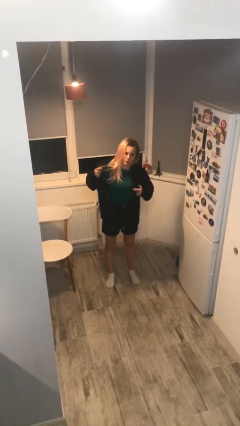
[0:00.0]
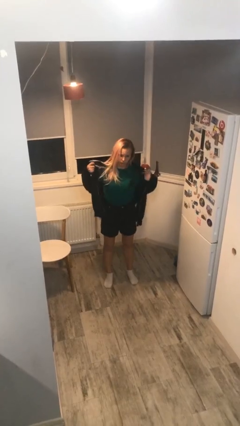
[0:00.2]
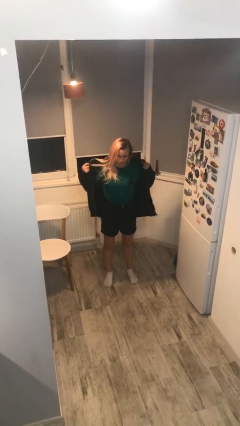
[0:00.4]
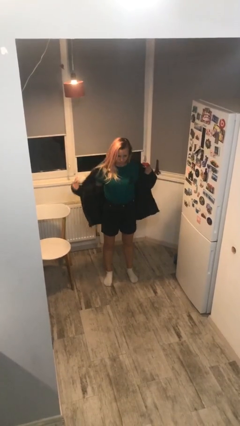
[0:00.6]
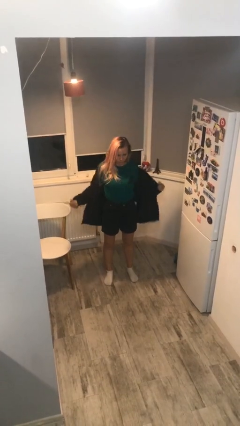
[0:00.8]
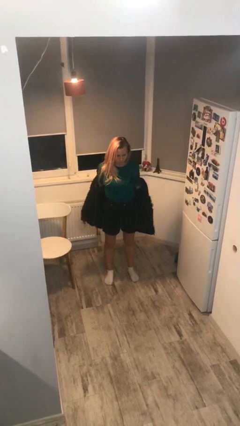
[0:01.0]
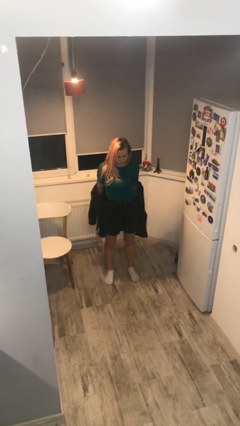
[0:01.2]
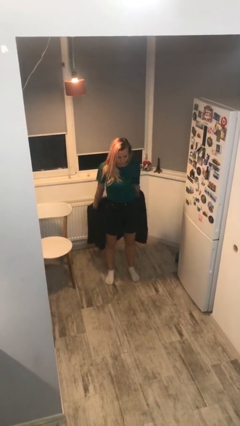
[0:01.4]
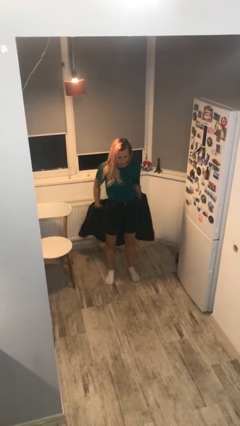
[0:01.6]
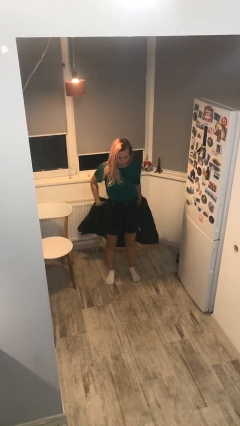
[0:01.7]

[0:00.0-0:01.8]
person takes off jacket

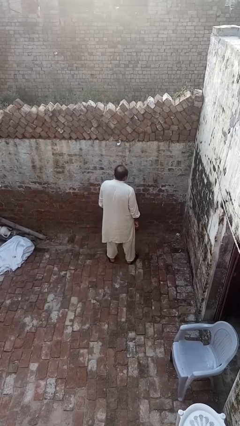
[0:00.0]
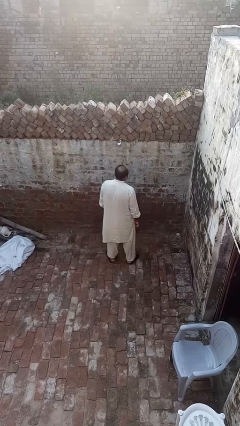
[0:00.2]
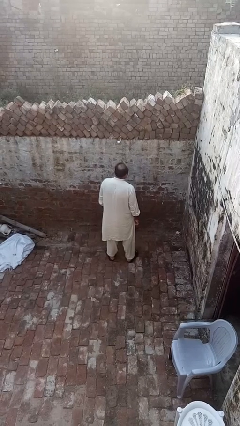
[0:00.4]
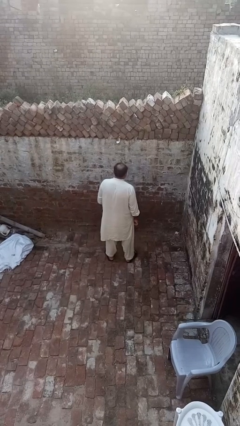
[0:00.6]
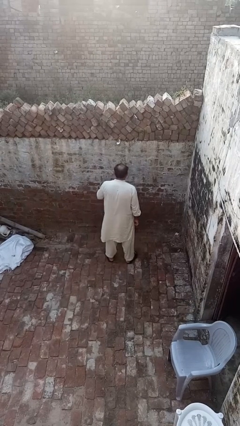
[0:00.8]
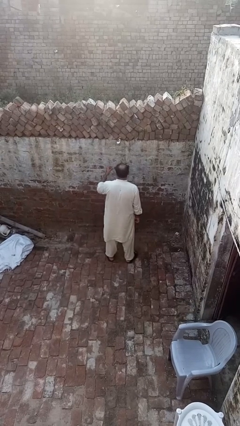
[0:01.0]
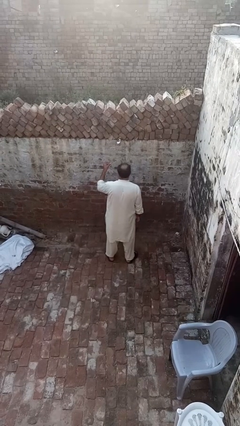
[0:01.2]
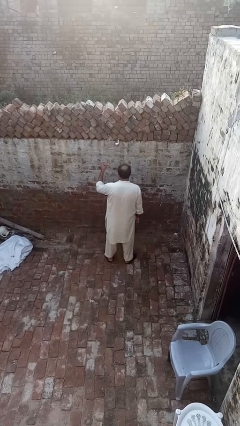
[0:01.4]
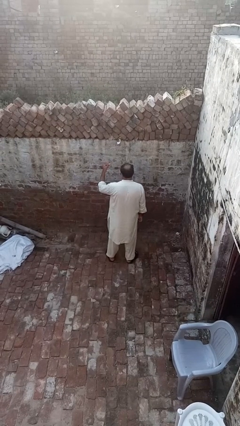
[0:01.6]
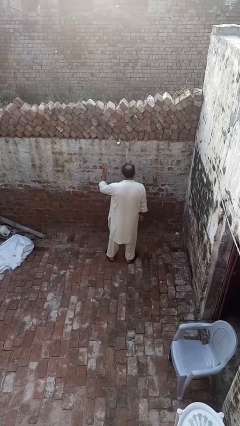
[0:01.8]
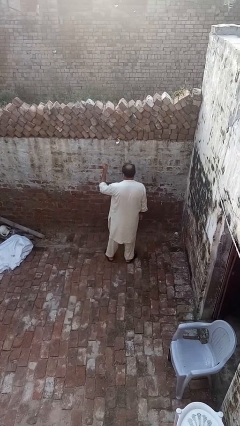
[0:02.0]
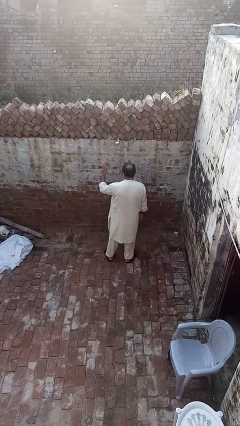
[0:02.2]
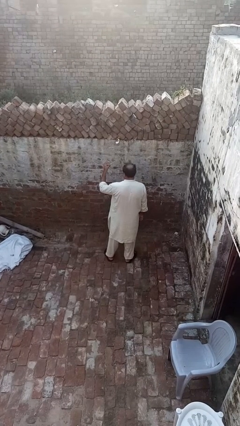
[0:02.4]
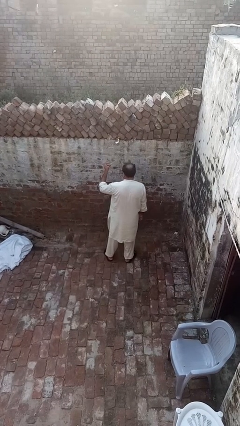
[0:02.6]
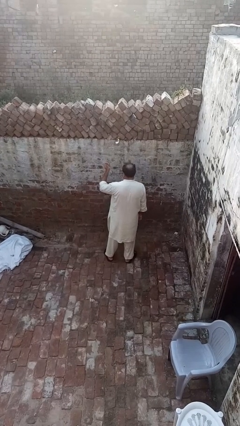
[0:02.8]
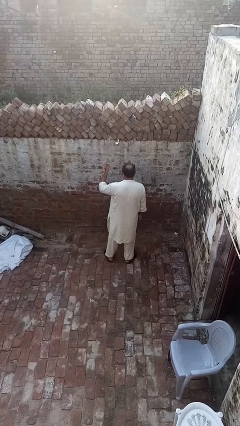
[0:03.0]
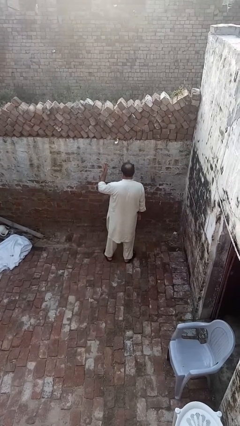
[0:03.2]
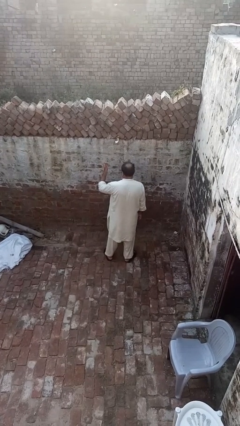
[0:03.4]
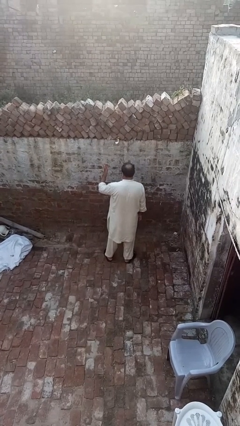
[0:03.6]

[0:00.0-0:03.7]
person snaps fingers

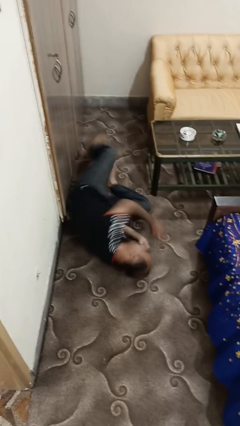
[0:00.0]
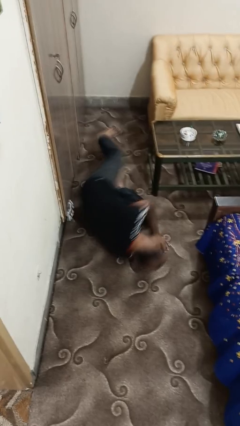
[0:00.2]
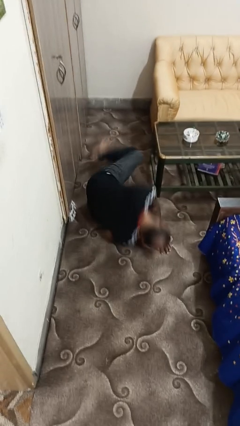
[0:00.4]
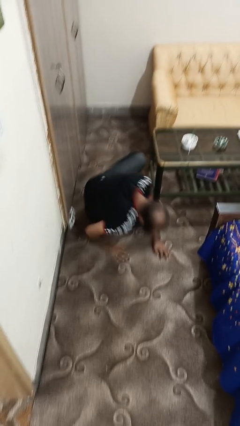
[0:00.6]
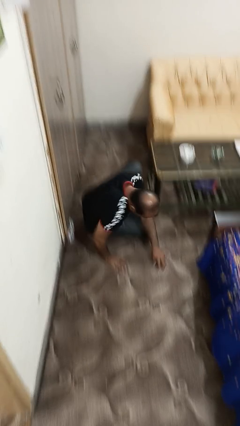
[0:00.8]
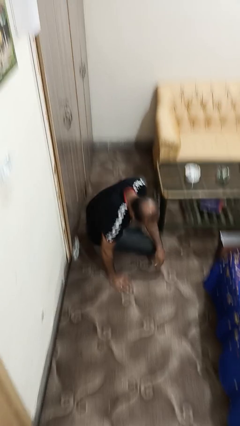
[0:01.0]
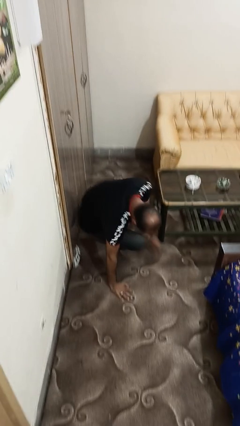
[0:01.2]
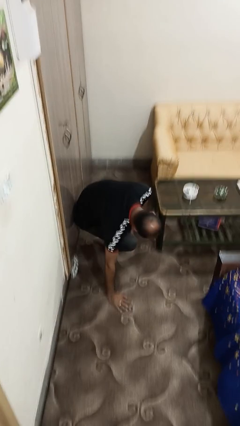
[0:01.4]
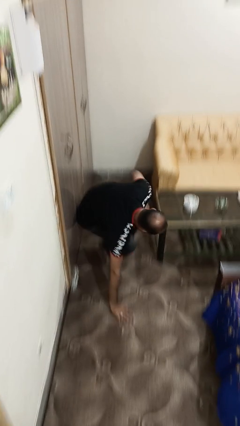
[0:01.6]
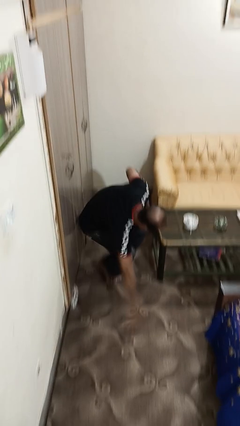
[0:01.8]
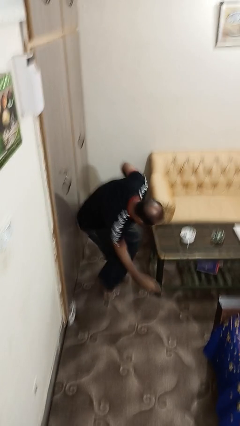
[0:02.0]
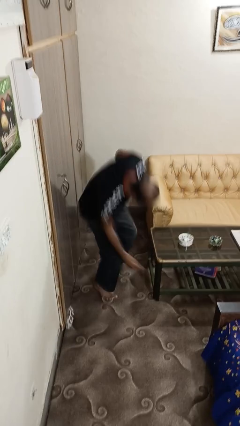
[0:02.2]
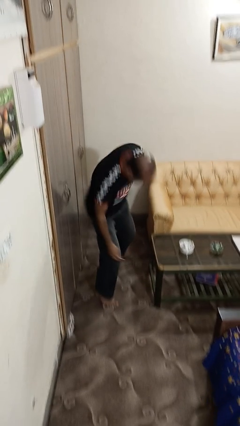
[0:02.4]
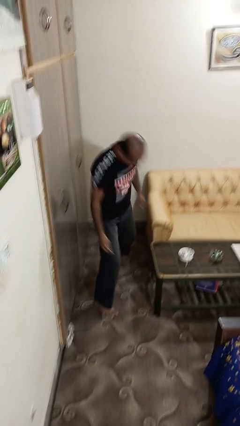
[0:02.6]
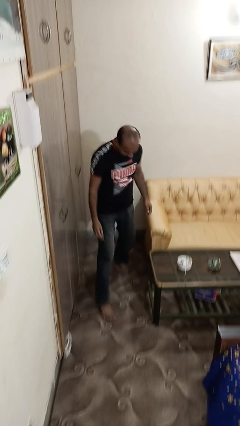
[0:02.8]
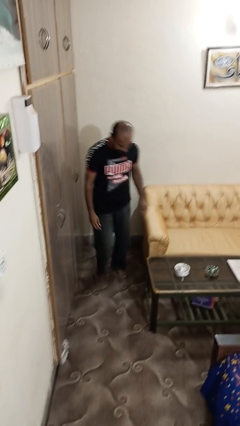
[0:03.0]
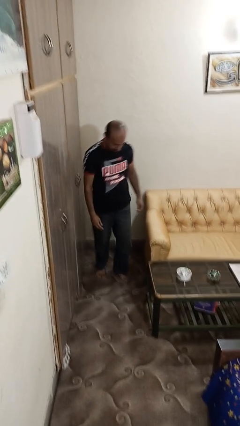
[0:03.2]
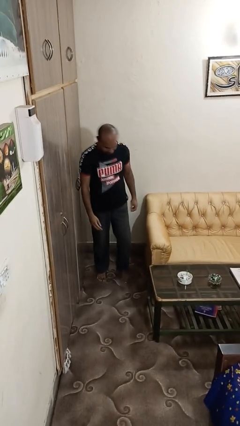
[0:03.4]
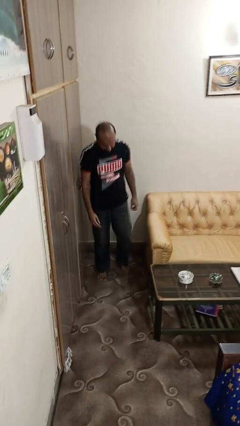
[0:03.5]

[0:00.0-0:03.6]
person stands up from floor

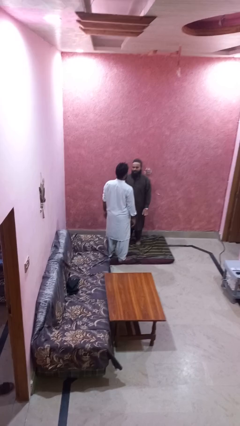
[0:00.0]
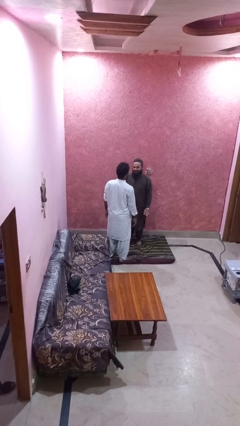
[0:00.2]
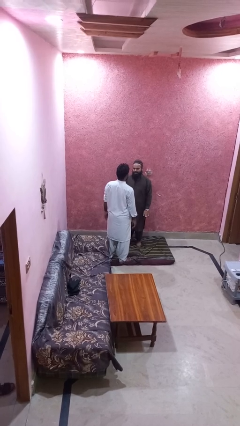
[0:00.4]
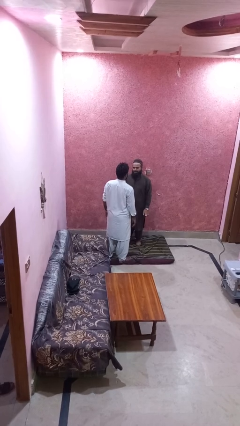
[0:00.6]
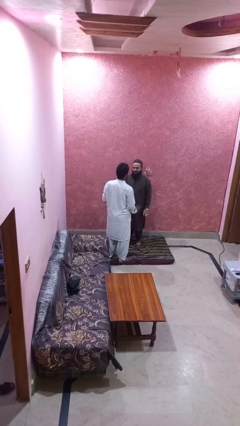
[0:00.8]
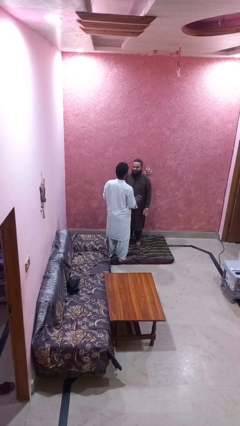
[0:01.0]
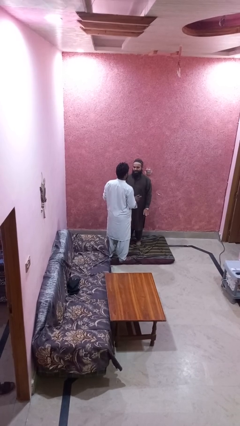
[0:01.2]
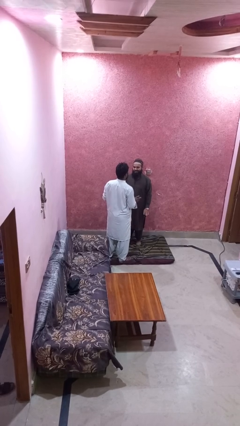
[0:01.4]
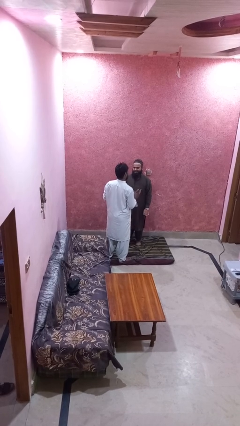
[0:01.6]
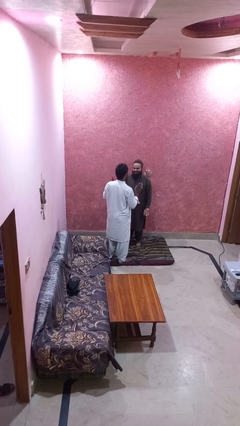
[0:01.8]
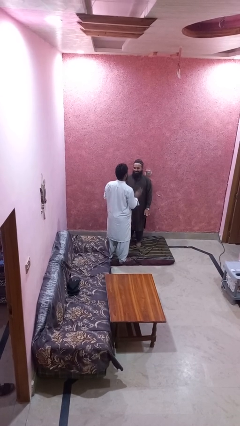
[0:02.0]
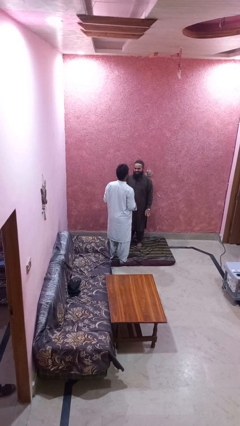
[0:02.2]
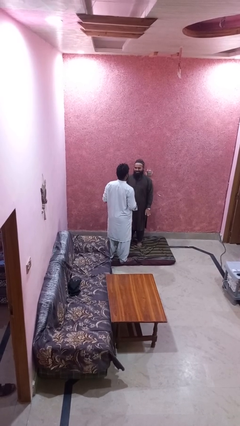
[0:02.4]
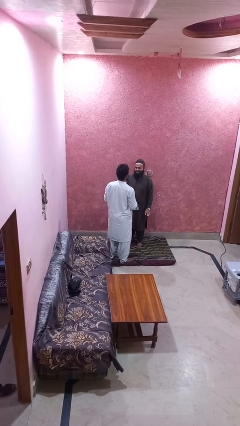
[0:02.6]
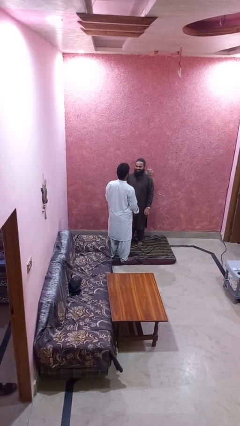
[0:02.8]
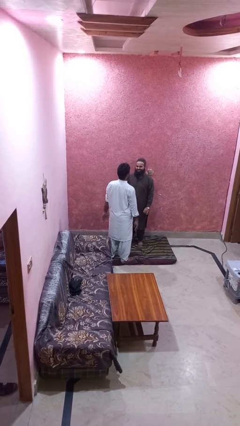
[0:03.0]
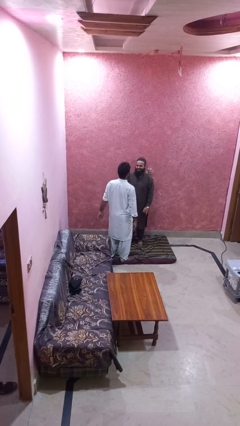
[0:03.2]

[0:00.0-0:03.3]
person laughs with person

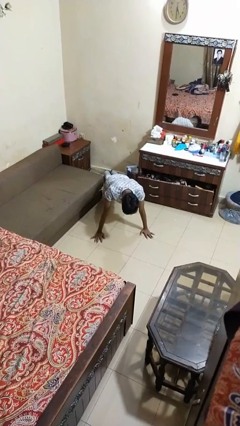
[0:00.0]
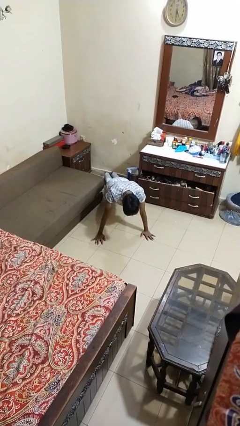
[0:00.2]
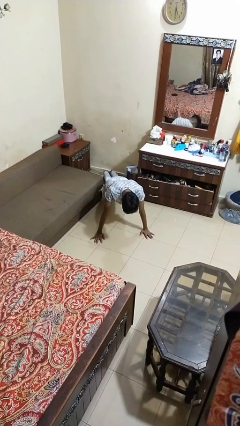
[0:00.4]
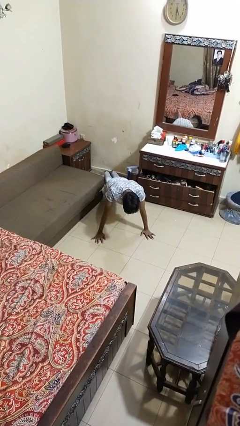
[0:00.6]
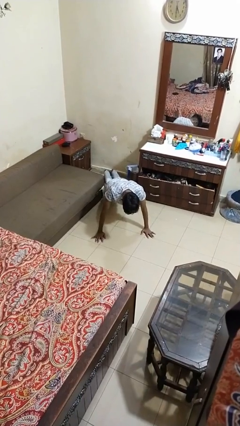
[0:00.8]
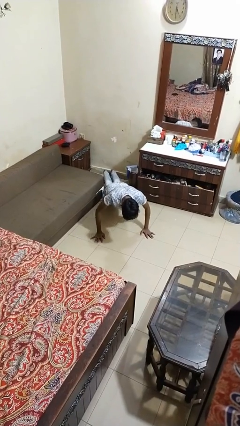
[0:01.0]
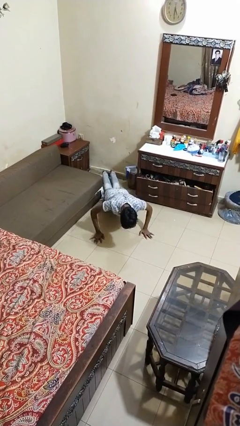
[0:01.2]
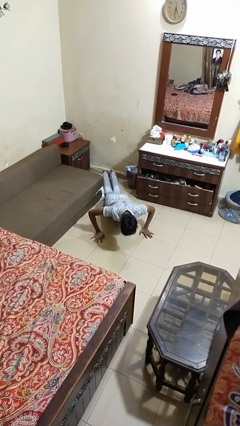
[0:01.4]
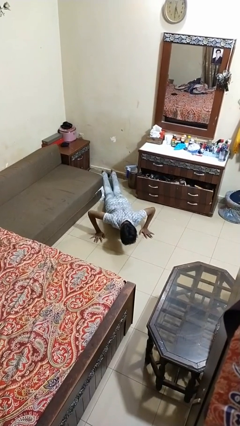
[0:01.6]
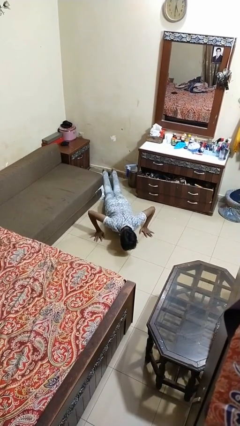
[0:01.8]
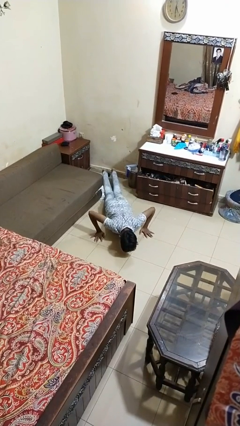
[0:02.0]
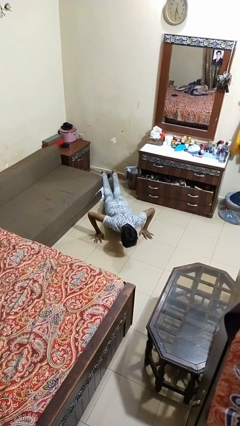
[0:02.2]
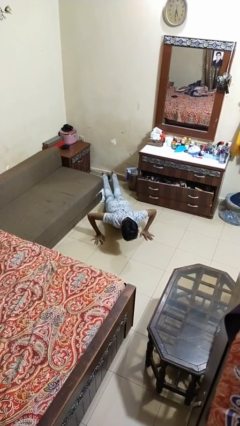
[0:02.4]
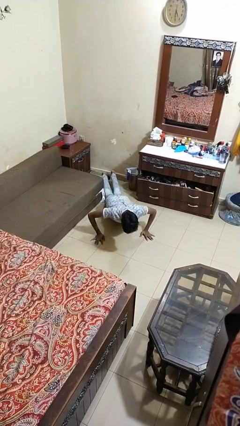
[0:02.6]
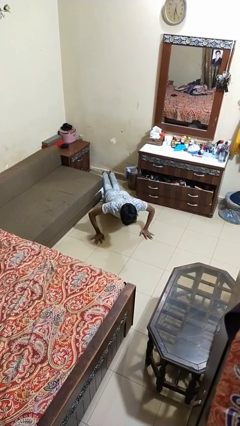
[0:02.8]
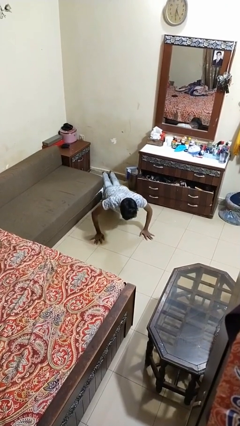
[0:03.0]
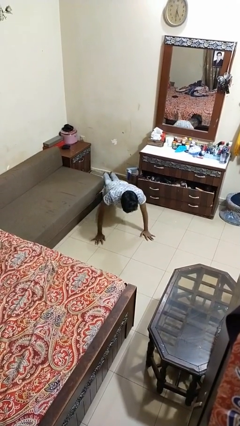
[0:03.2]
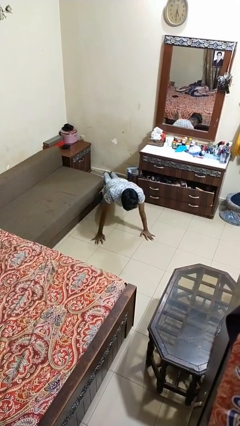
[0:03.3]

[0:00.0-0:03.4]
person exercises with pushup

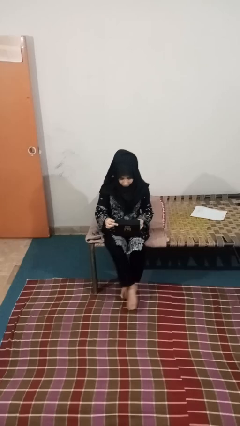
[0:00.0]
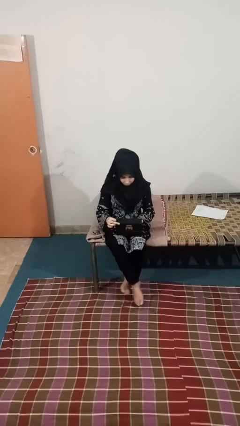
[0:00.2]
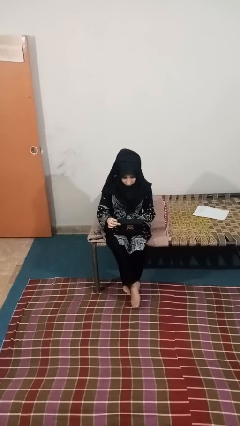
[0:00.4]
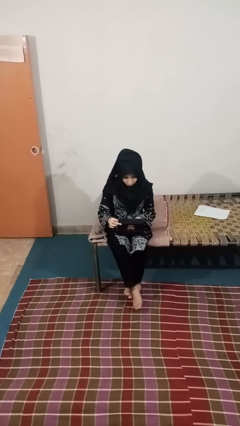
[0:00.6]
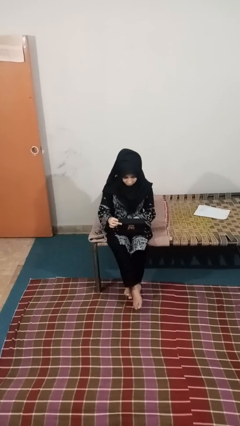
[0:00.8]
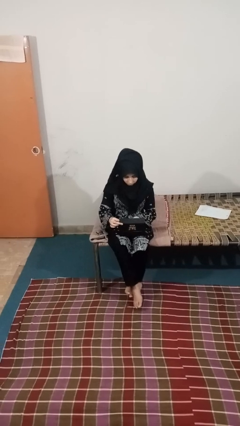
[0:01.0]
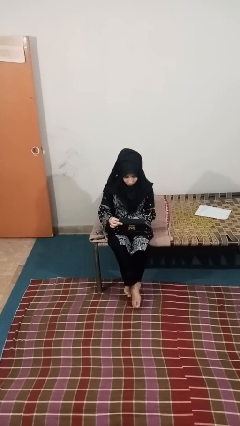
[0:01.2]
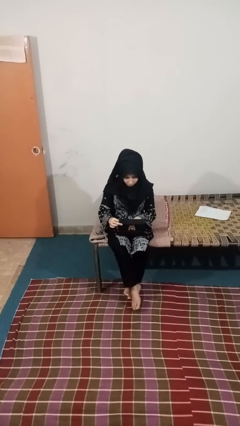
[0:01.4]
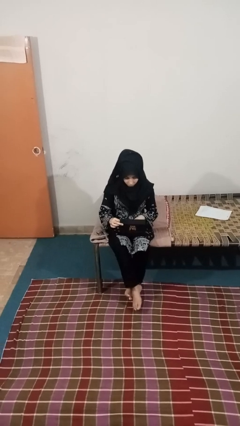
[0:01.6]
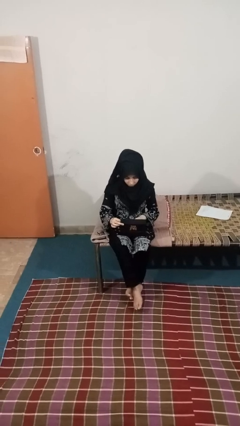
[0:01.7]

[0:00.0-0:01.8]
person searches jewelry box
